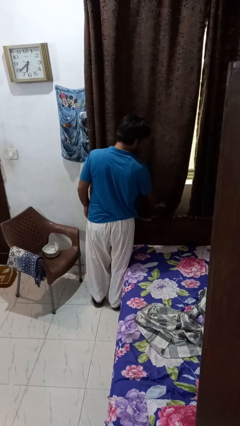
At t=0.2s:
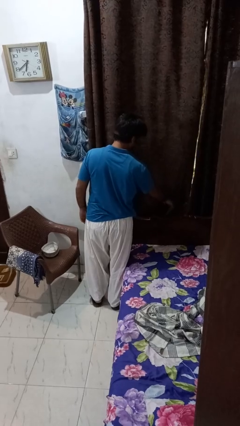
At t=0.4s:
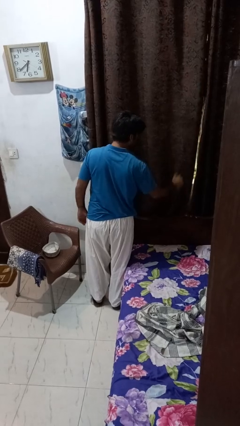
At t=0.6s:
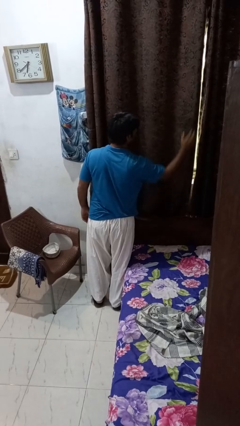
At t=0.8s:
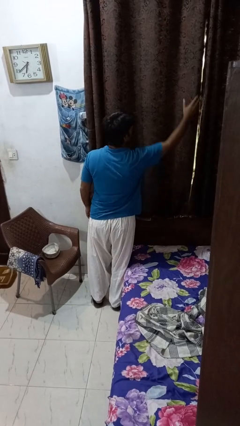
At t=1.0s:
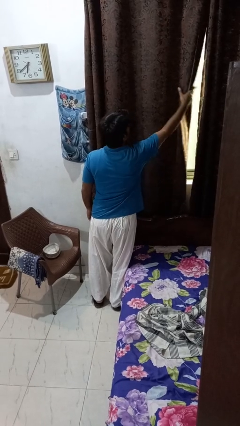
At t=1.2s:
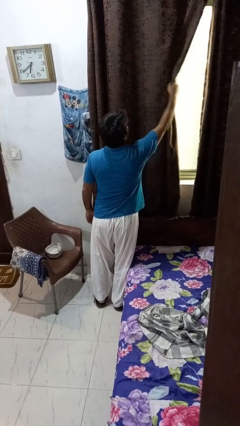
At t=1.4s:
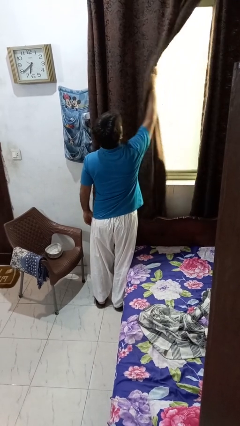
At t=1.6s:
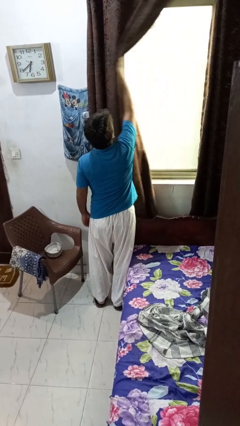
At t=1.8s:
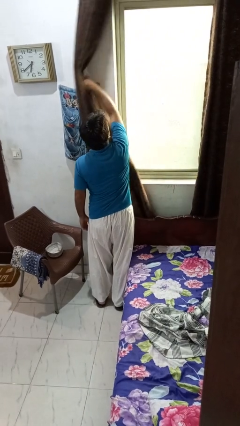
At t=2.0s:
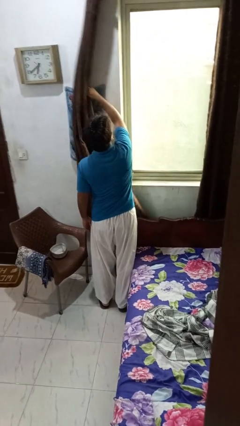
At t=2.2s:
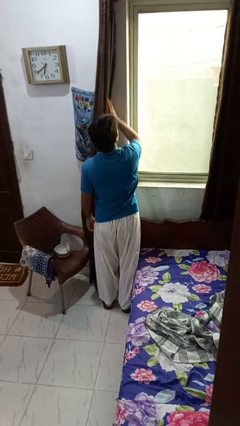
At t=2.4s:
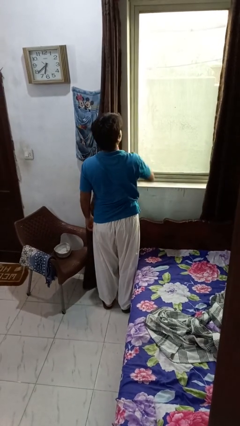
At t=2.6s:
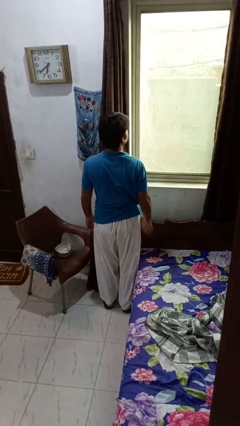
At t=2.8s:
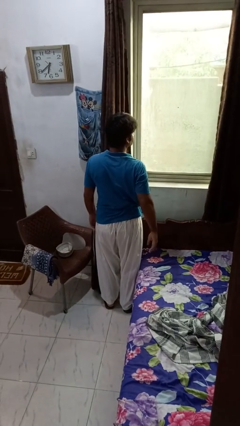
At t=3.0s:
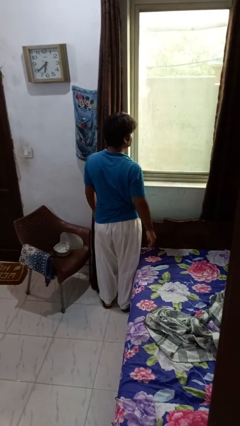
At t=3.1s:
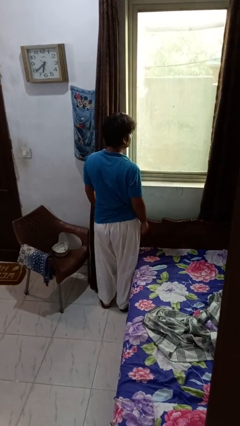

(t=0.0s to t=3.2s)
person opens curtains

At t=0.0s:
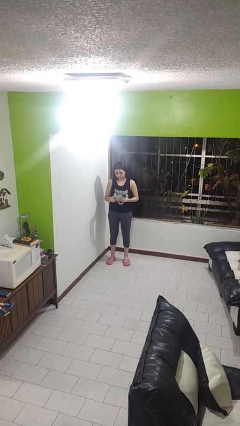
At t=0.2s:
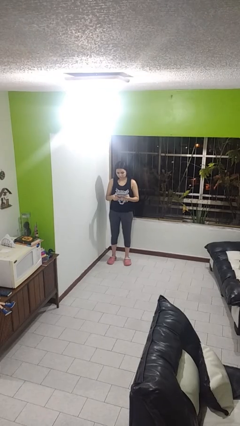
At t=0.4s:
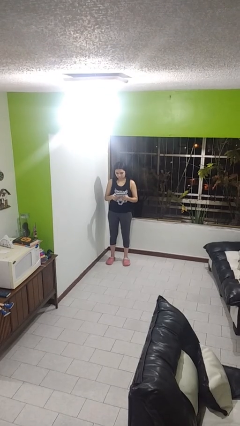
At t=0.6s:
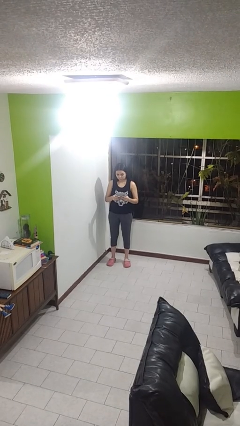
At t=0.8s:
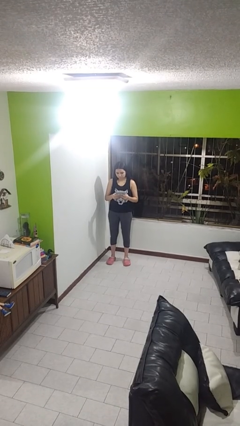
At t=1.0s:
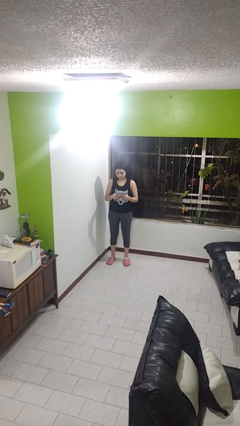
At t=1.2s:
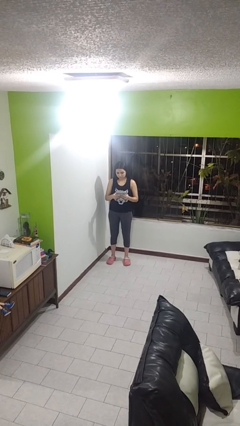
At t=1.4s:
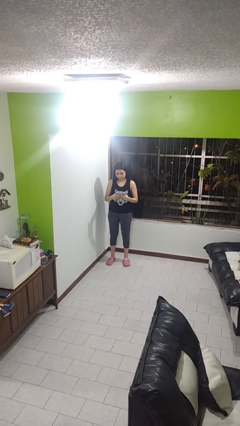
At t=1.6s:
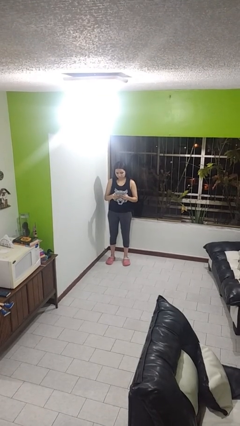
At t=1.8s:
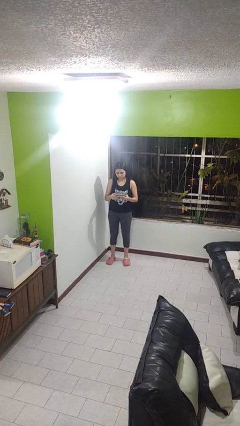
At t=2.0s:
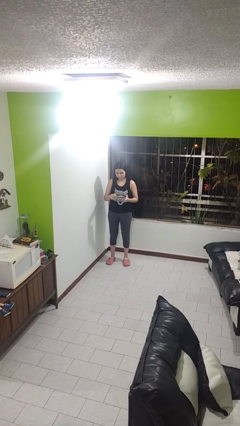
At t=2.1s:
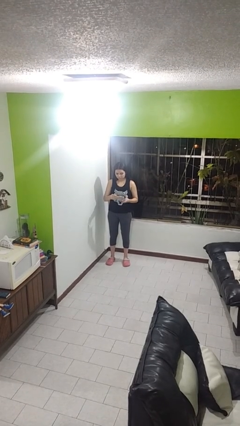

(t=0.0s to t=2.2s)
person interacts with handheld game

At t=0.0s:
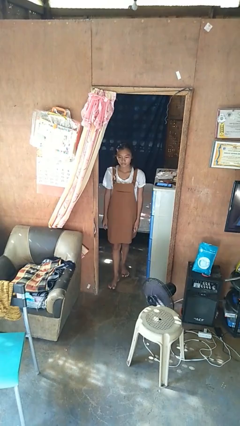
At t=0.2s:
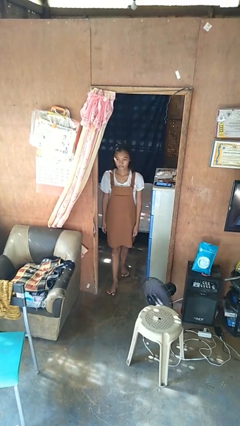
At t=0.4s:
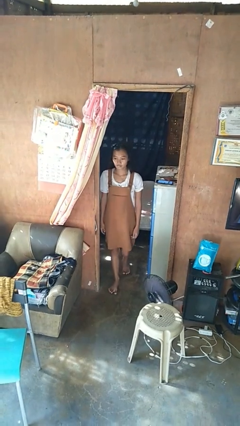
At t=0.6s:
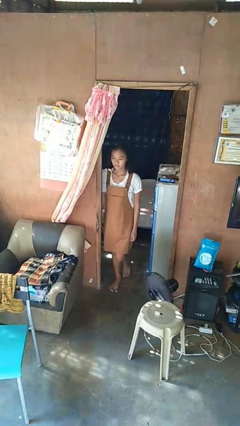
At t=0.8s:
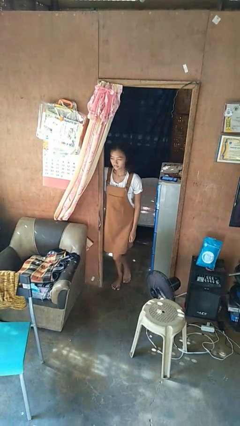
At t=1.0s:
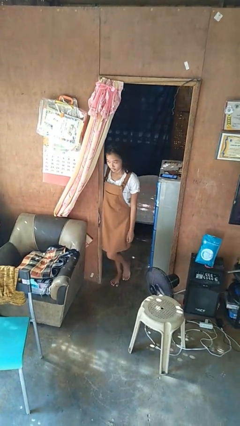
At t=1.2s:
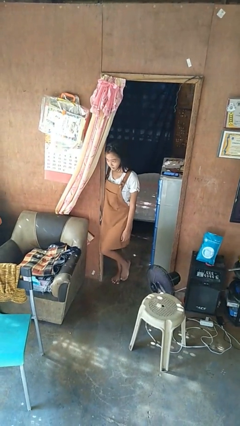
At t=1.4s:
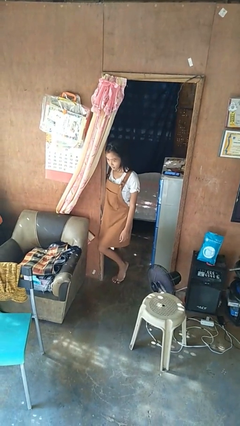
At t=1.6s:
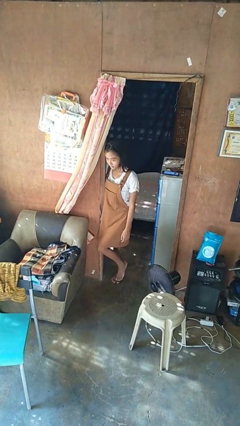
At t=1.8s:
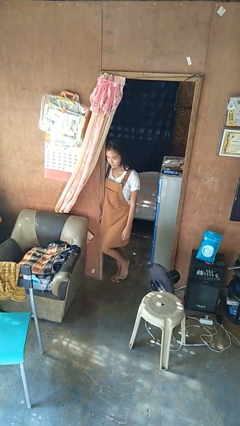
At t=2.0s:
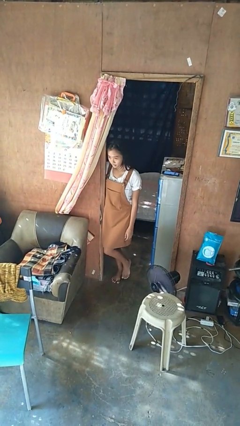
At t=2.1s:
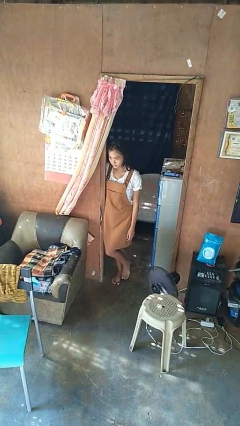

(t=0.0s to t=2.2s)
person bumps into wall

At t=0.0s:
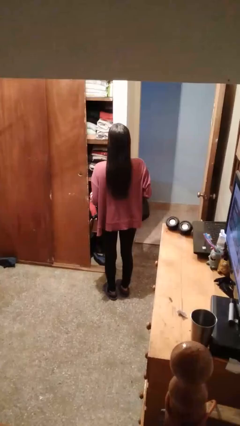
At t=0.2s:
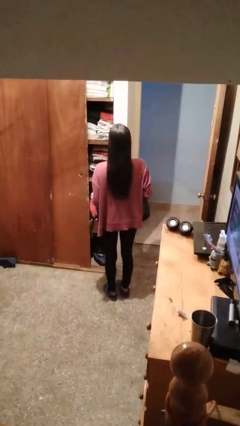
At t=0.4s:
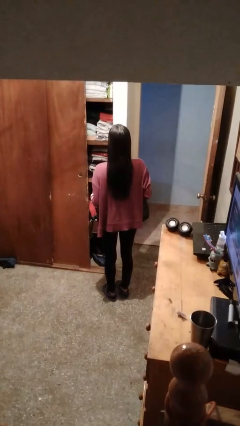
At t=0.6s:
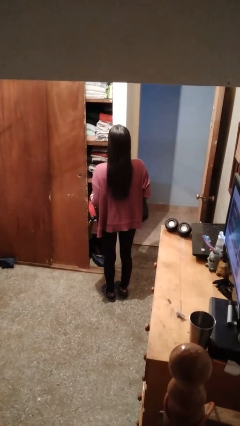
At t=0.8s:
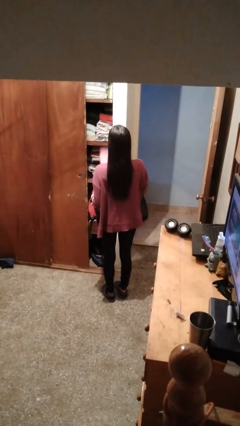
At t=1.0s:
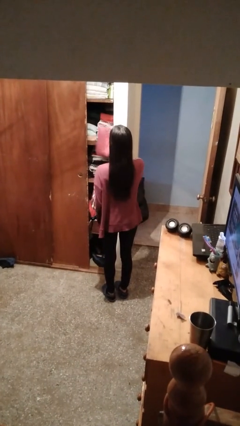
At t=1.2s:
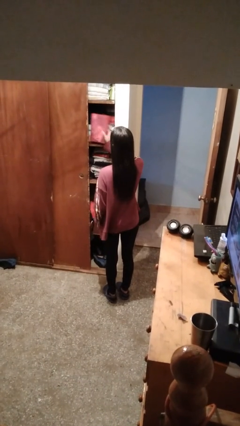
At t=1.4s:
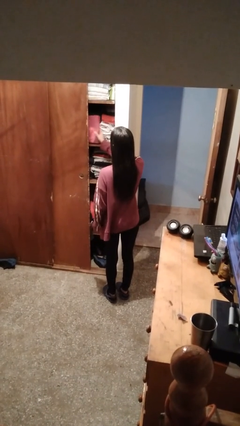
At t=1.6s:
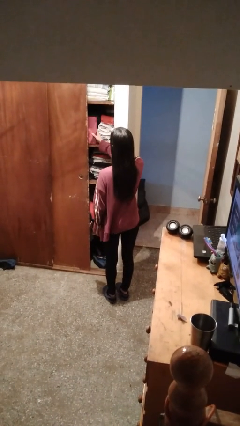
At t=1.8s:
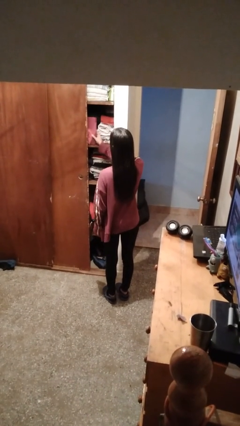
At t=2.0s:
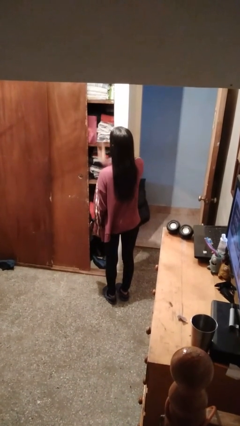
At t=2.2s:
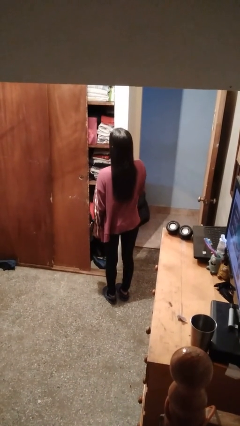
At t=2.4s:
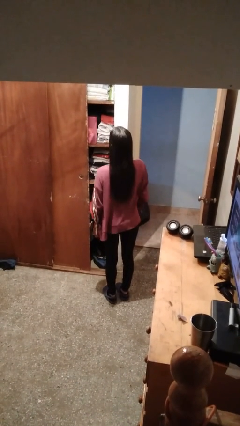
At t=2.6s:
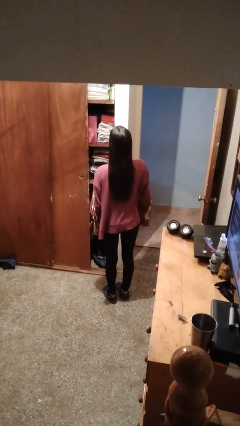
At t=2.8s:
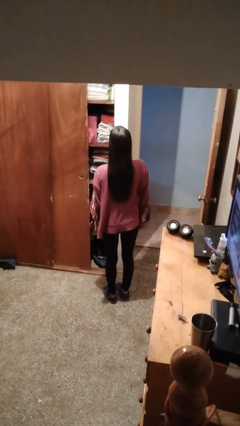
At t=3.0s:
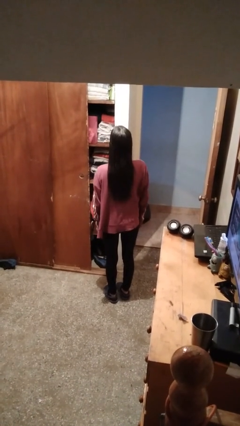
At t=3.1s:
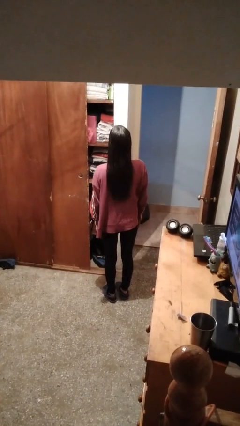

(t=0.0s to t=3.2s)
person picks up object from shelf

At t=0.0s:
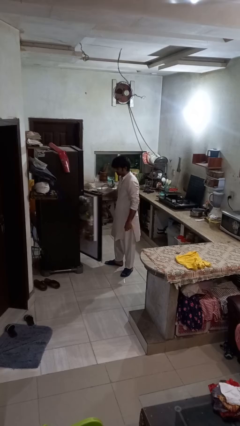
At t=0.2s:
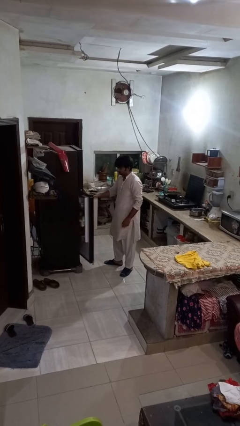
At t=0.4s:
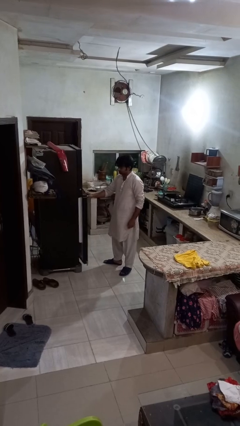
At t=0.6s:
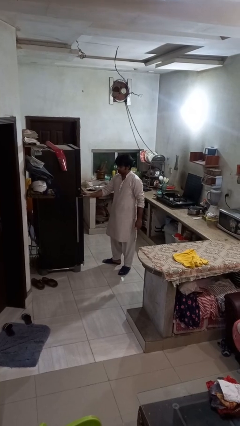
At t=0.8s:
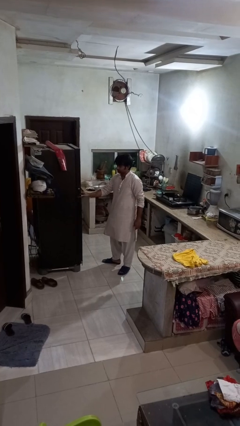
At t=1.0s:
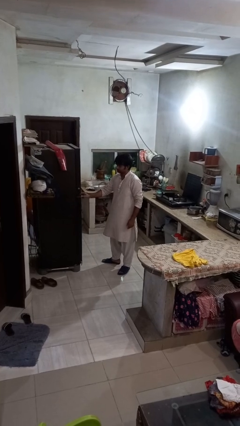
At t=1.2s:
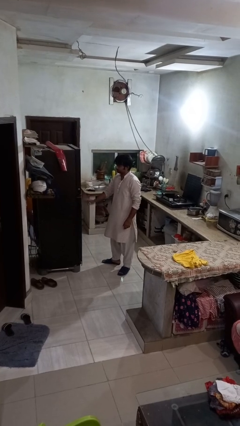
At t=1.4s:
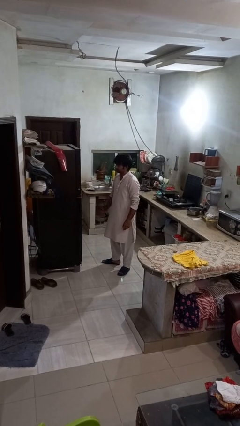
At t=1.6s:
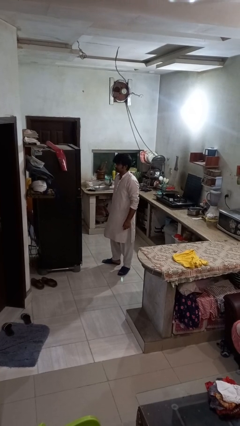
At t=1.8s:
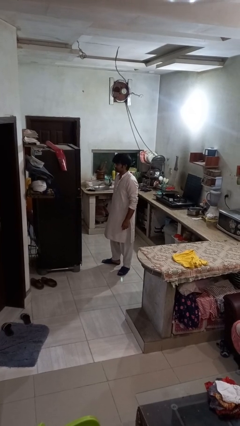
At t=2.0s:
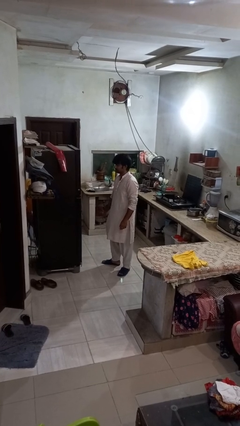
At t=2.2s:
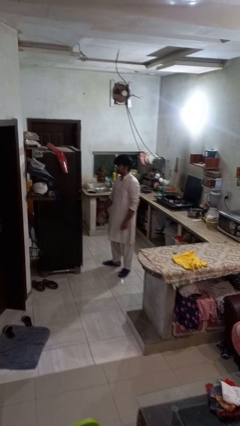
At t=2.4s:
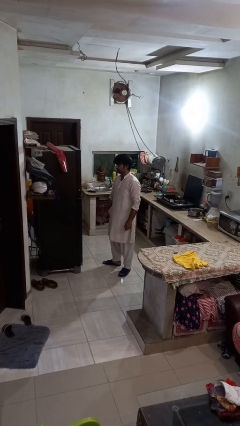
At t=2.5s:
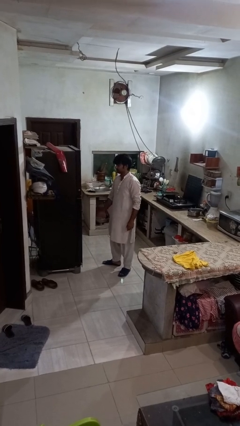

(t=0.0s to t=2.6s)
person closes refrigerator

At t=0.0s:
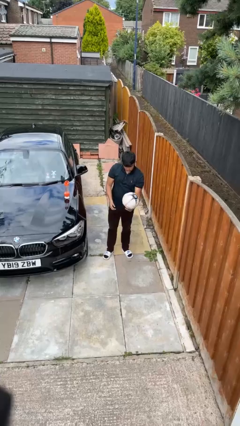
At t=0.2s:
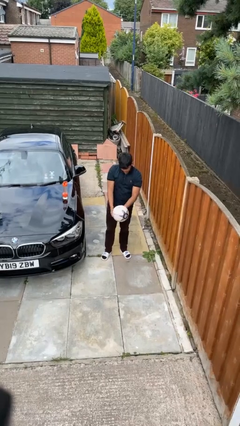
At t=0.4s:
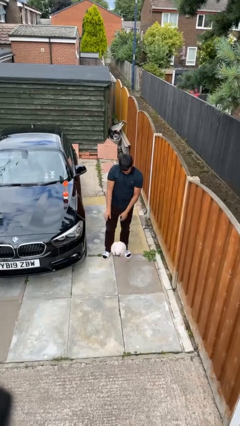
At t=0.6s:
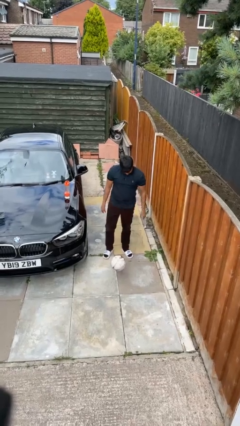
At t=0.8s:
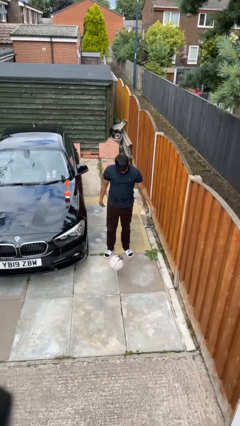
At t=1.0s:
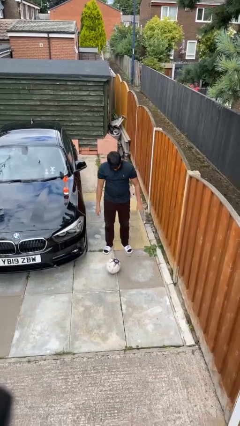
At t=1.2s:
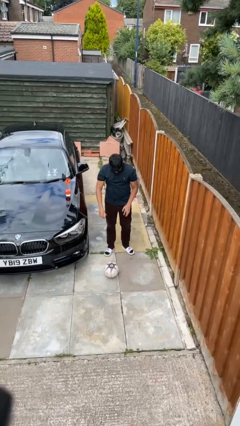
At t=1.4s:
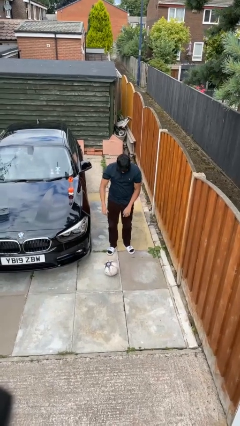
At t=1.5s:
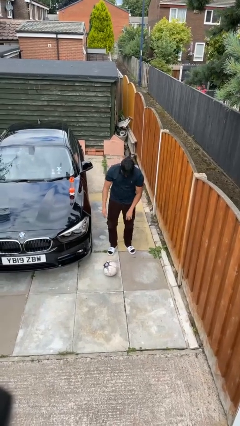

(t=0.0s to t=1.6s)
person drops object

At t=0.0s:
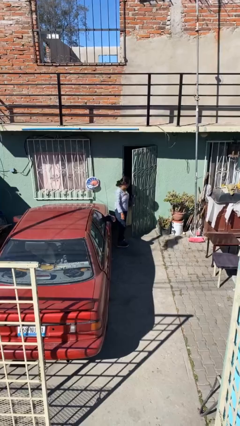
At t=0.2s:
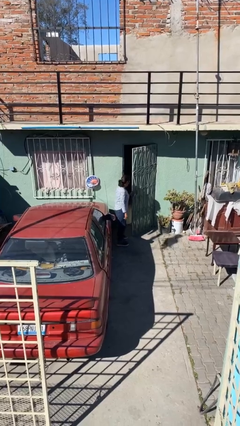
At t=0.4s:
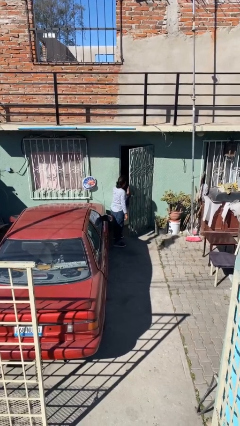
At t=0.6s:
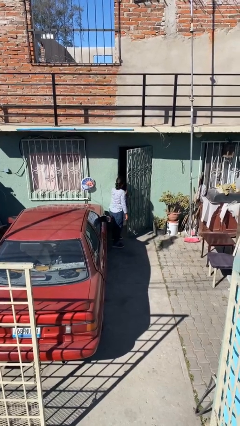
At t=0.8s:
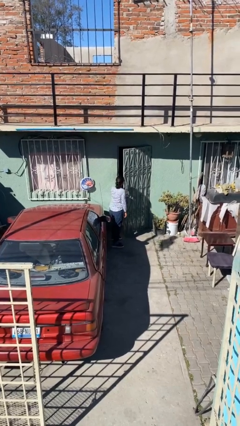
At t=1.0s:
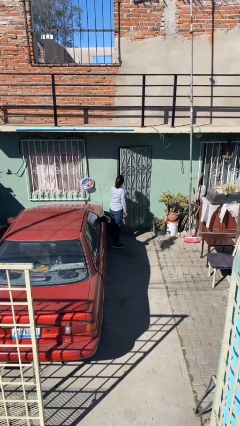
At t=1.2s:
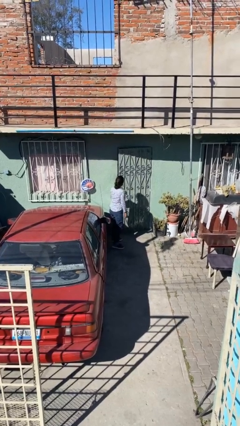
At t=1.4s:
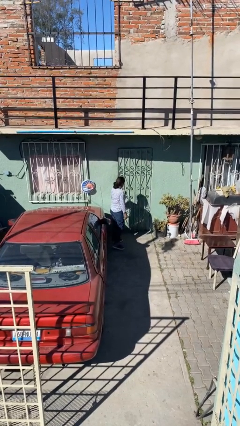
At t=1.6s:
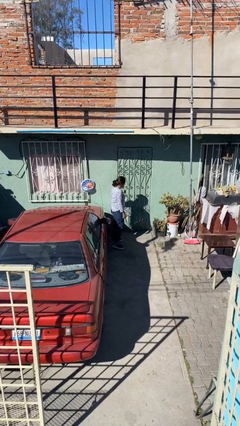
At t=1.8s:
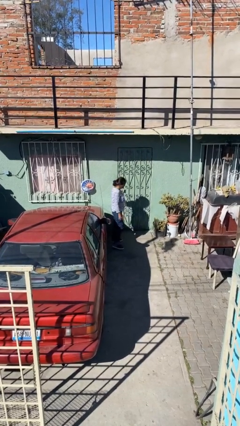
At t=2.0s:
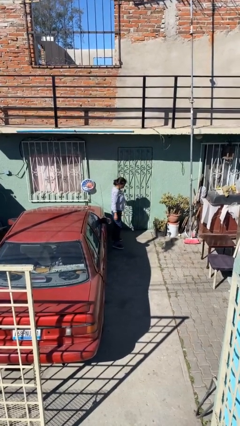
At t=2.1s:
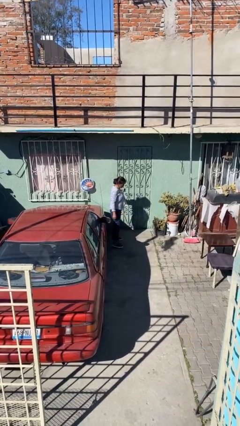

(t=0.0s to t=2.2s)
person closes facility door
